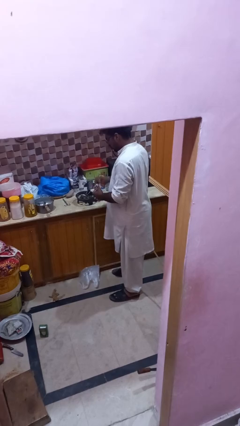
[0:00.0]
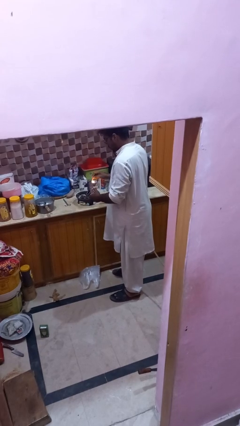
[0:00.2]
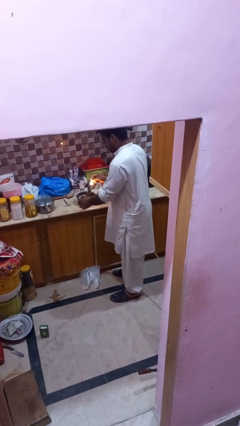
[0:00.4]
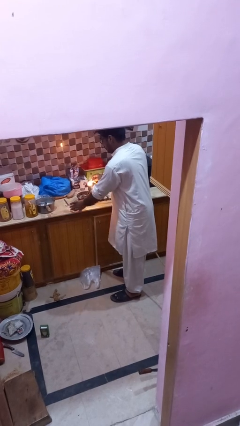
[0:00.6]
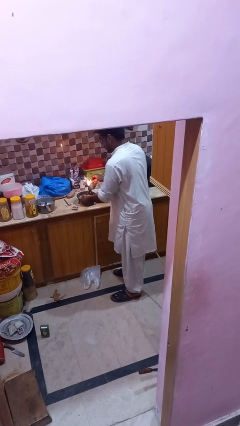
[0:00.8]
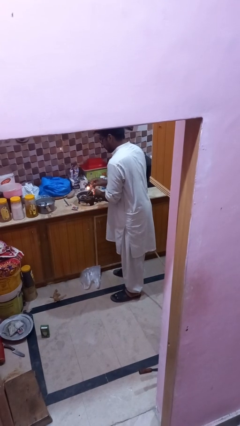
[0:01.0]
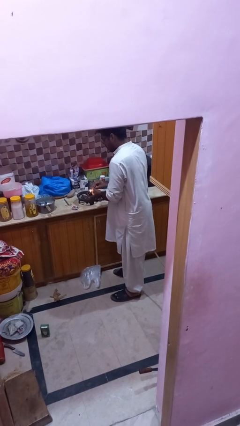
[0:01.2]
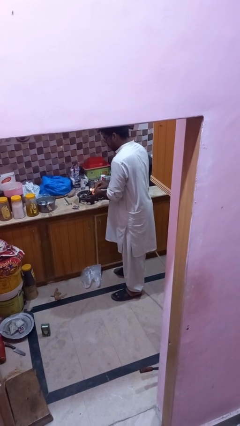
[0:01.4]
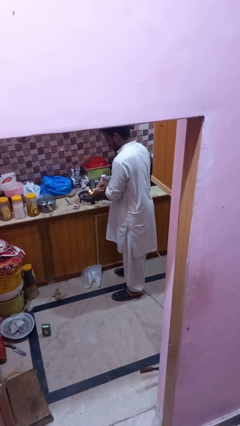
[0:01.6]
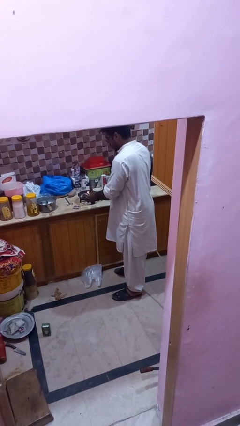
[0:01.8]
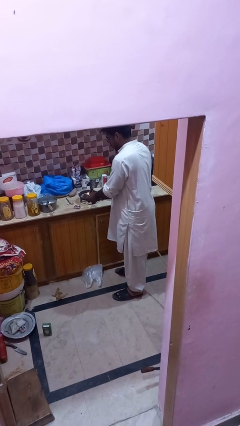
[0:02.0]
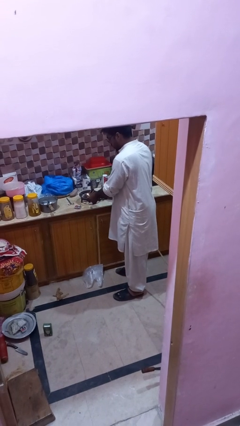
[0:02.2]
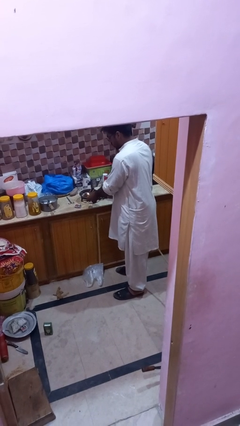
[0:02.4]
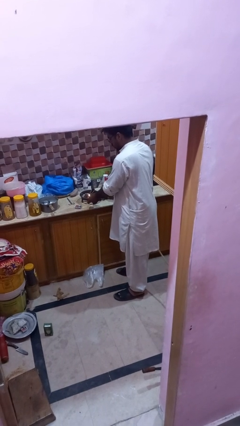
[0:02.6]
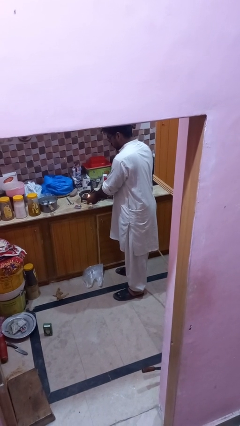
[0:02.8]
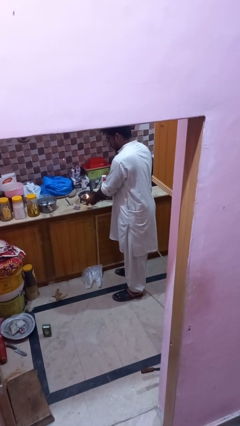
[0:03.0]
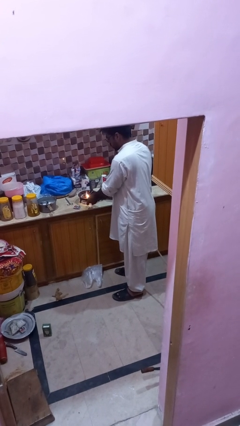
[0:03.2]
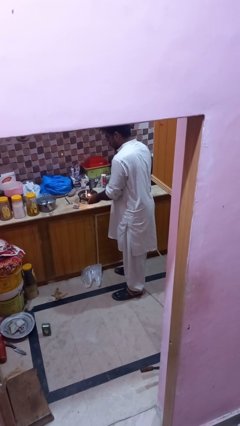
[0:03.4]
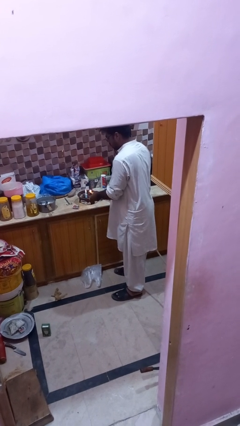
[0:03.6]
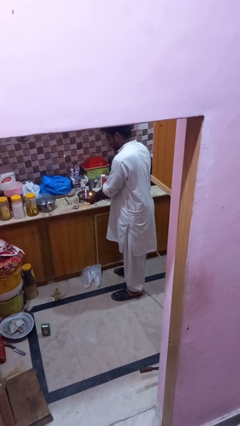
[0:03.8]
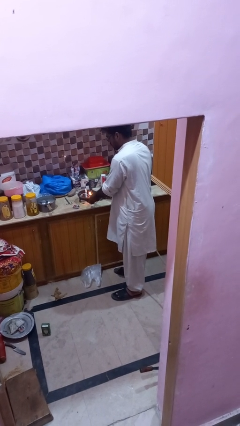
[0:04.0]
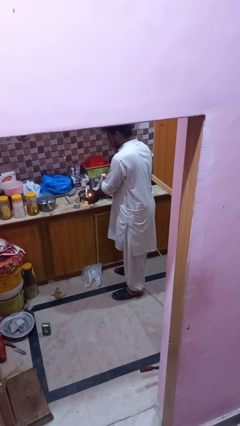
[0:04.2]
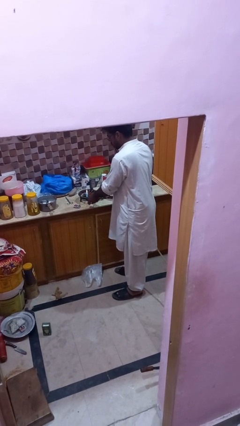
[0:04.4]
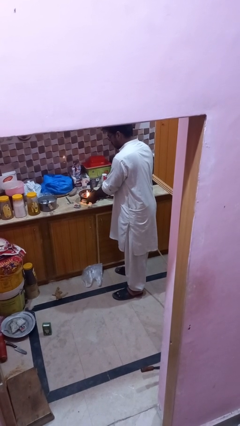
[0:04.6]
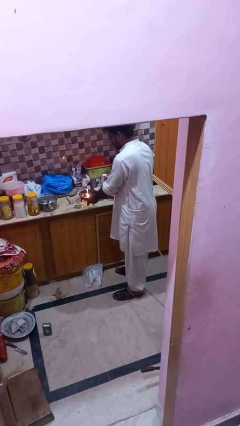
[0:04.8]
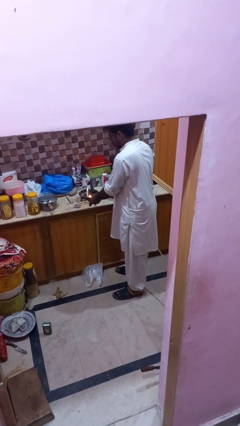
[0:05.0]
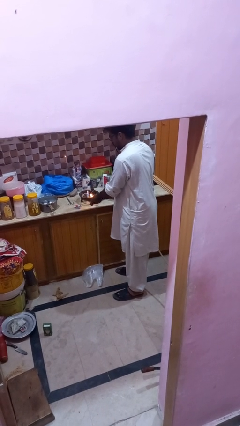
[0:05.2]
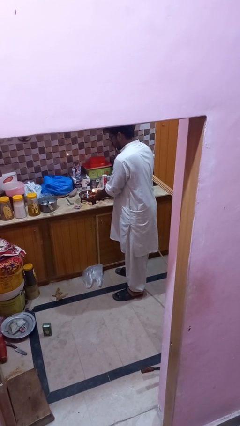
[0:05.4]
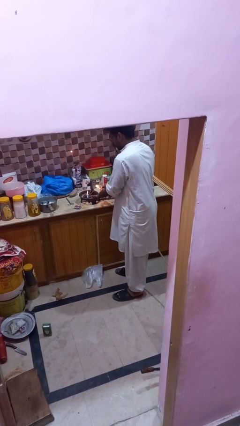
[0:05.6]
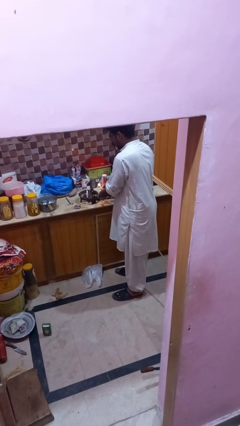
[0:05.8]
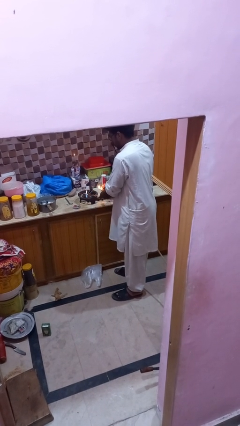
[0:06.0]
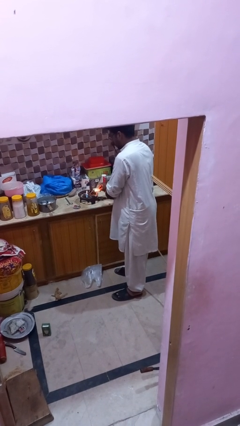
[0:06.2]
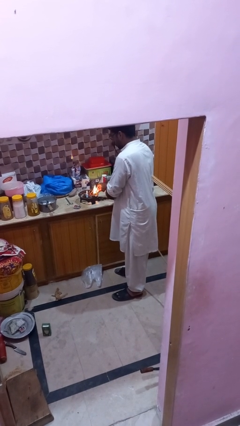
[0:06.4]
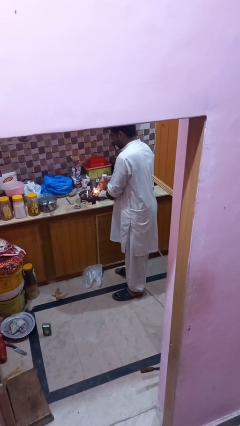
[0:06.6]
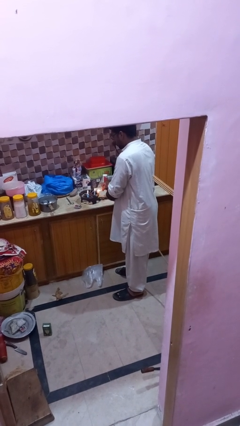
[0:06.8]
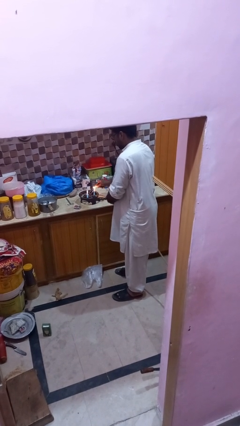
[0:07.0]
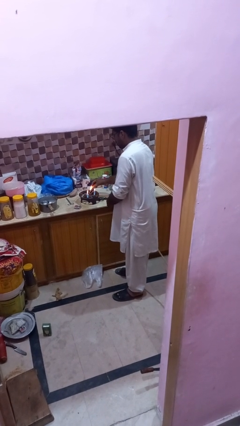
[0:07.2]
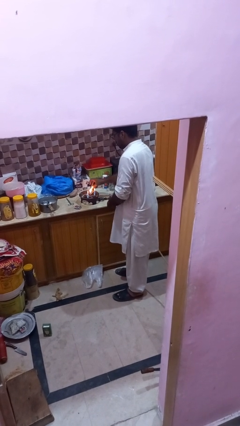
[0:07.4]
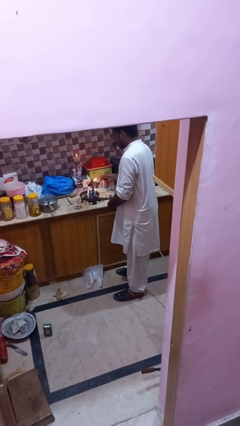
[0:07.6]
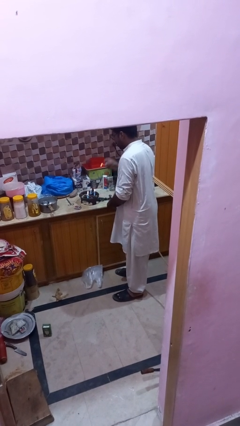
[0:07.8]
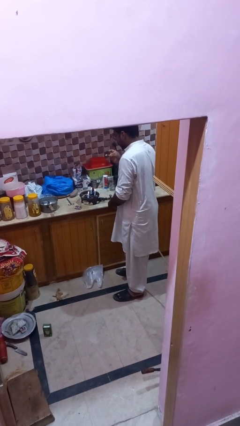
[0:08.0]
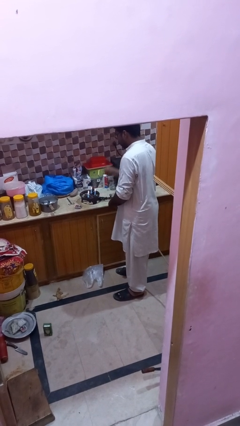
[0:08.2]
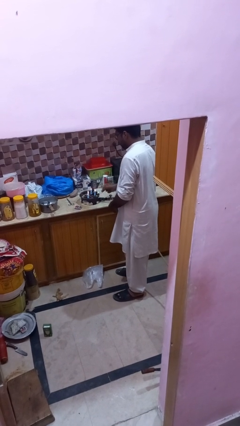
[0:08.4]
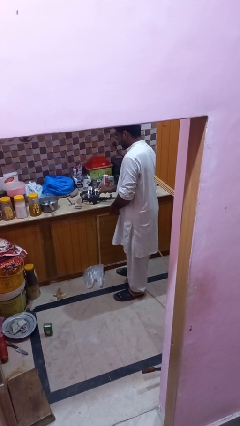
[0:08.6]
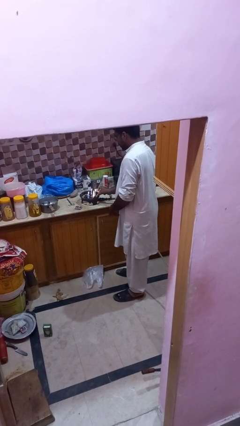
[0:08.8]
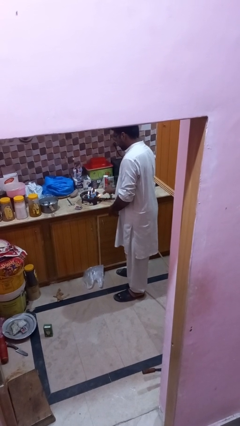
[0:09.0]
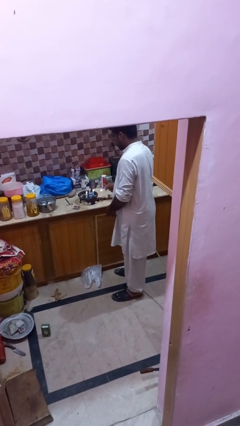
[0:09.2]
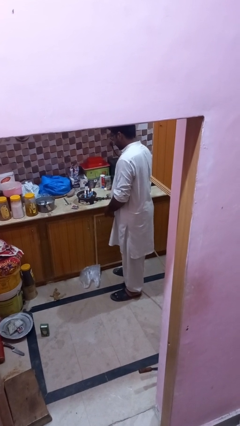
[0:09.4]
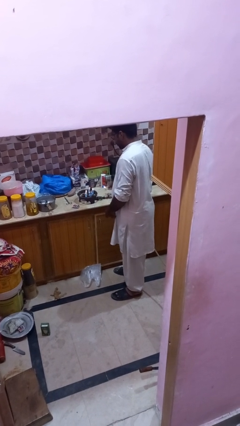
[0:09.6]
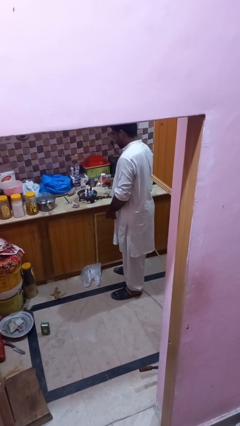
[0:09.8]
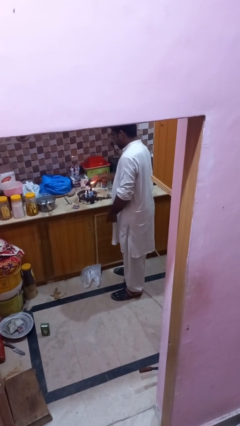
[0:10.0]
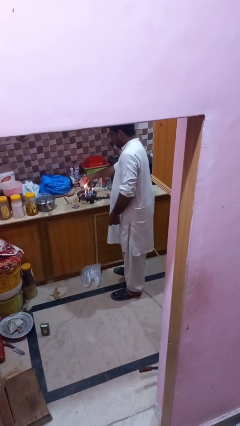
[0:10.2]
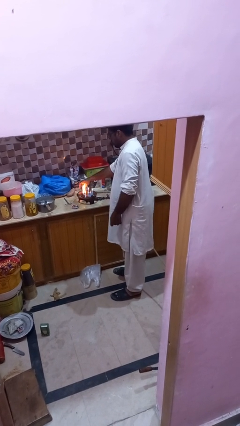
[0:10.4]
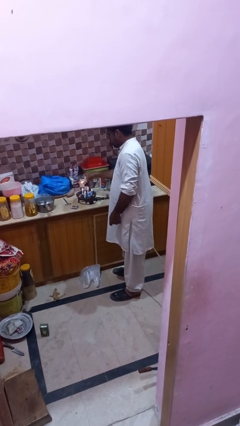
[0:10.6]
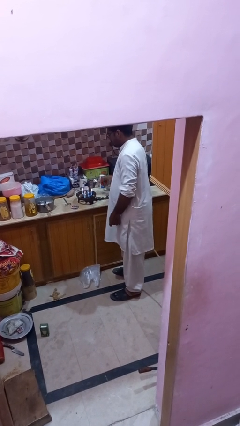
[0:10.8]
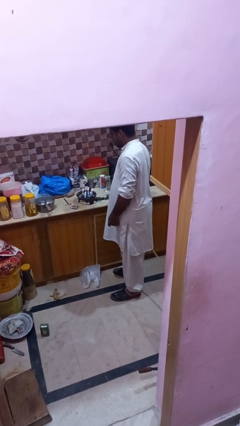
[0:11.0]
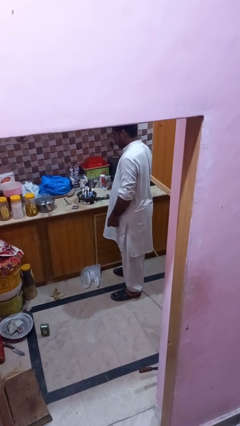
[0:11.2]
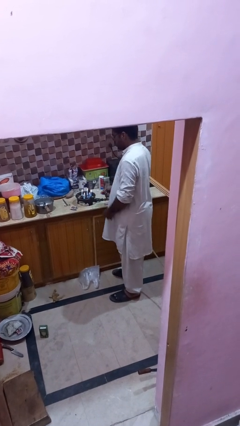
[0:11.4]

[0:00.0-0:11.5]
person turns on stovetop

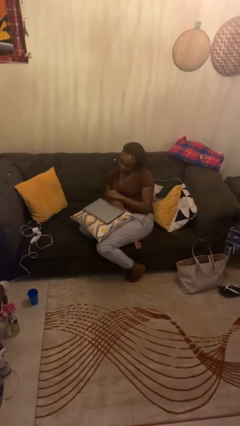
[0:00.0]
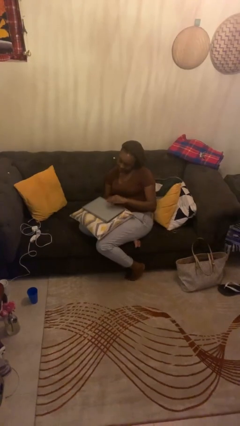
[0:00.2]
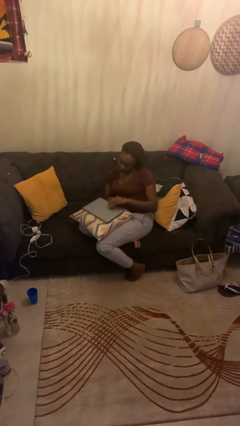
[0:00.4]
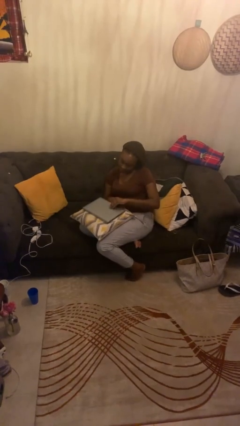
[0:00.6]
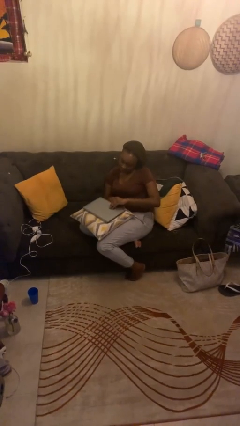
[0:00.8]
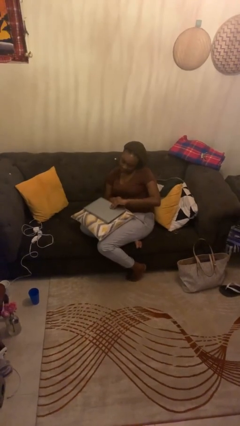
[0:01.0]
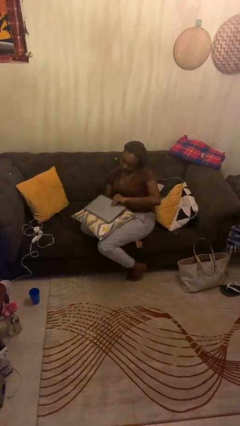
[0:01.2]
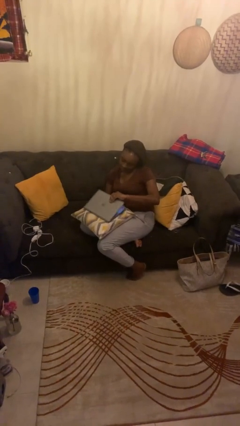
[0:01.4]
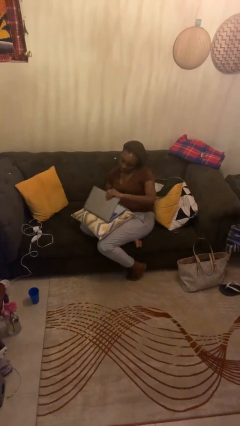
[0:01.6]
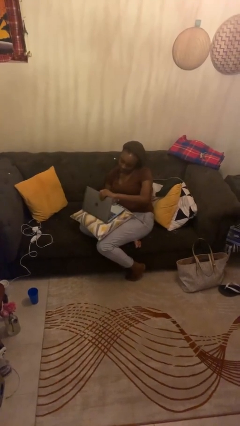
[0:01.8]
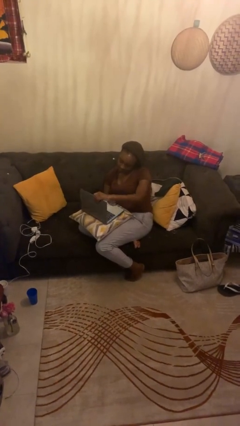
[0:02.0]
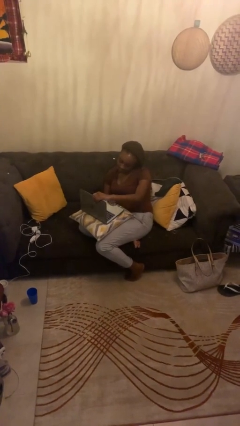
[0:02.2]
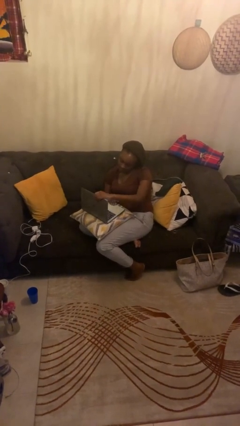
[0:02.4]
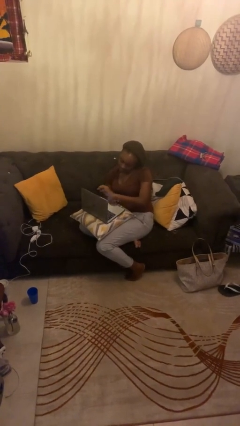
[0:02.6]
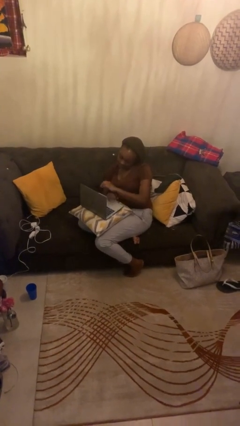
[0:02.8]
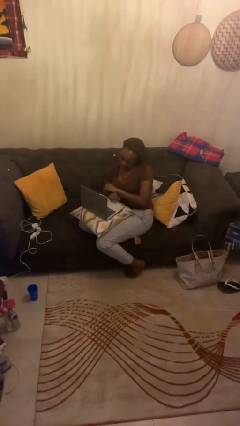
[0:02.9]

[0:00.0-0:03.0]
person opens laptop

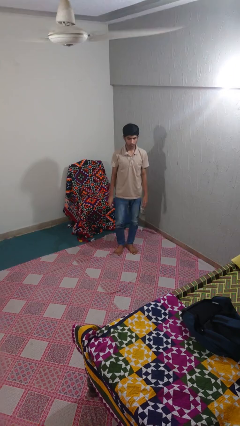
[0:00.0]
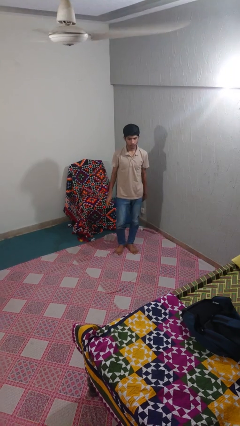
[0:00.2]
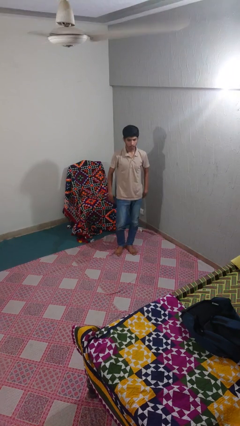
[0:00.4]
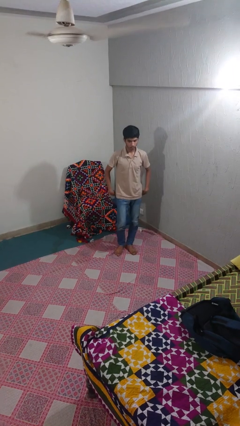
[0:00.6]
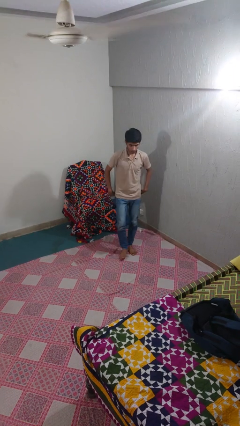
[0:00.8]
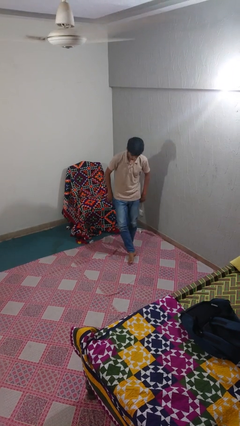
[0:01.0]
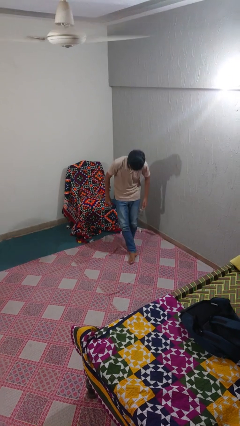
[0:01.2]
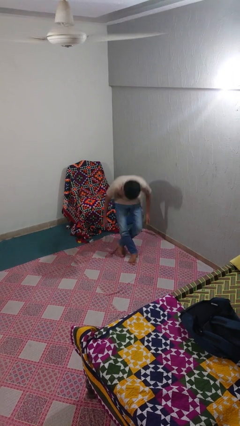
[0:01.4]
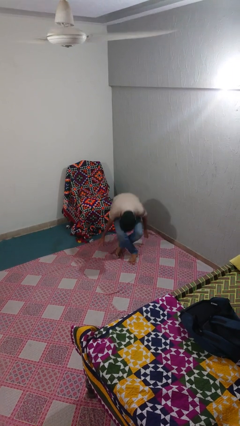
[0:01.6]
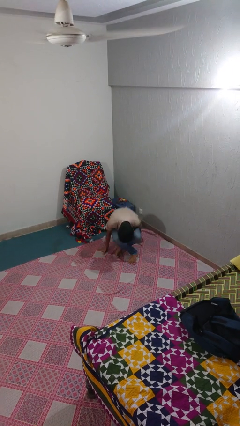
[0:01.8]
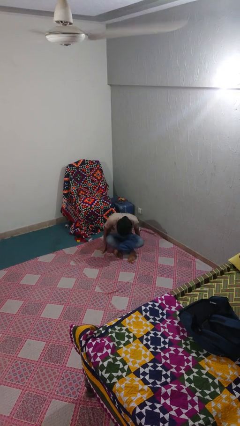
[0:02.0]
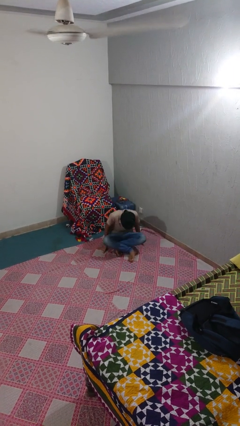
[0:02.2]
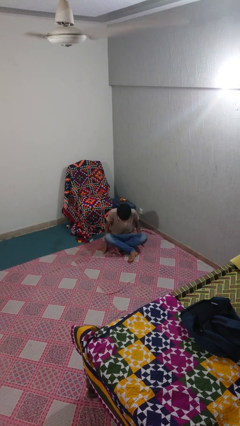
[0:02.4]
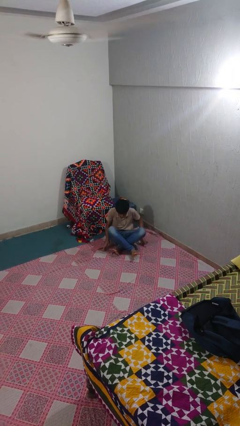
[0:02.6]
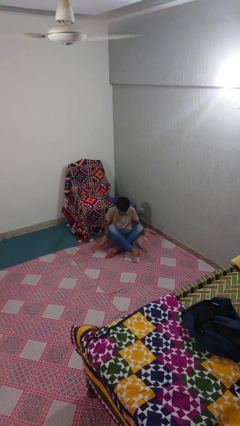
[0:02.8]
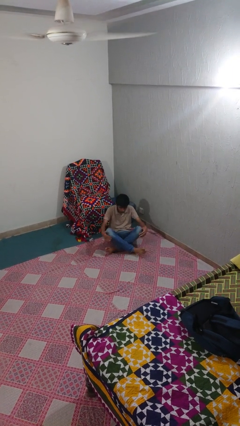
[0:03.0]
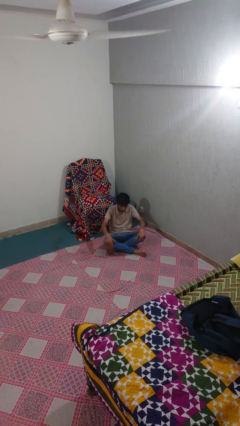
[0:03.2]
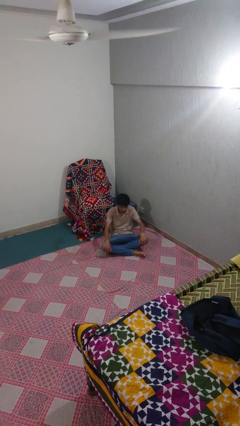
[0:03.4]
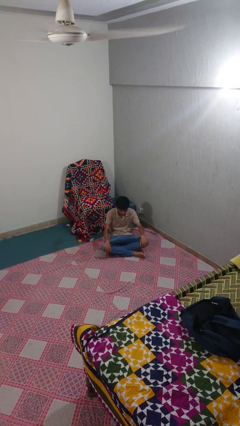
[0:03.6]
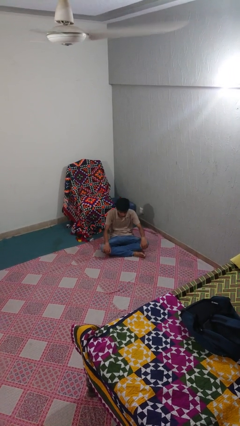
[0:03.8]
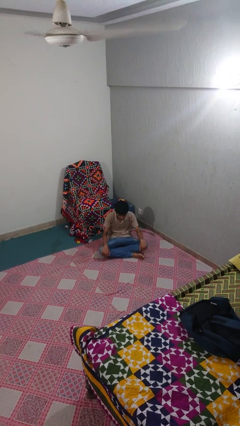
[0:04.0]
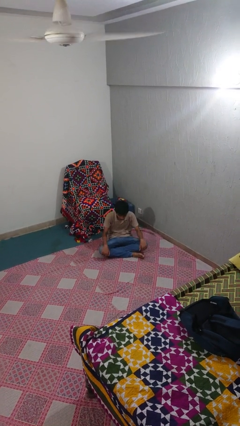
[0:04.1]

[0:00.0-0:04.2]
person sits crisscross

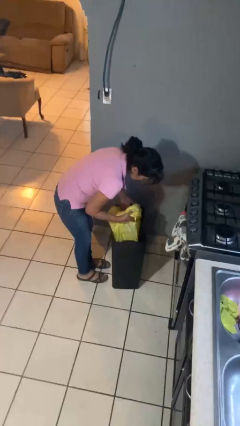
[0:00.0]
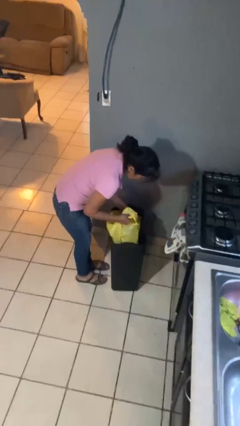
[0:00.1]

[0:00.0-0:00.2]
person inserts trashbag into trashcan
